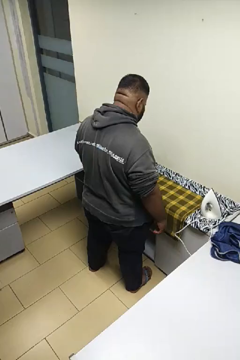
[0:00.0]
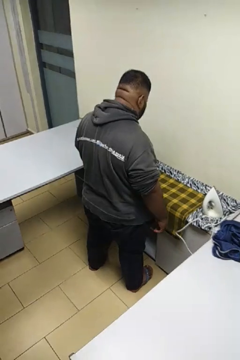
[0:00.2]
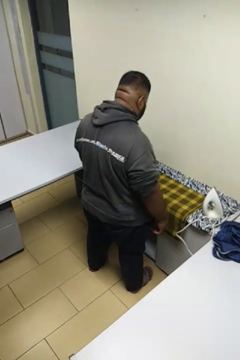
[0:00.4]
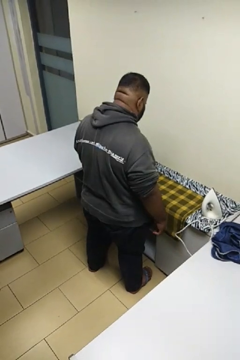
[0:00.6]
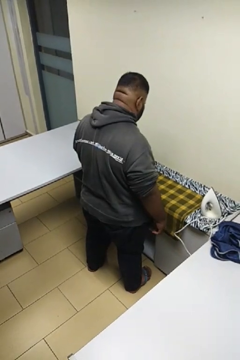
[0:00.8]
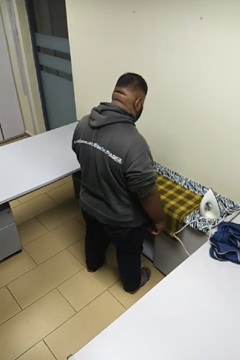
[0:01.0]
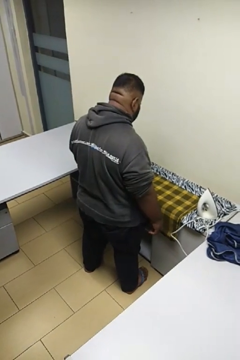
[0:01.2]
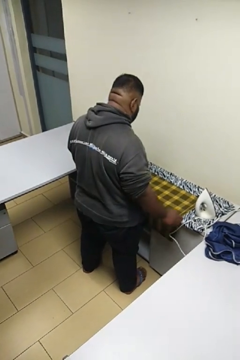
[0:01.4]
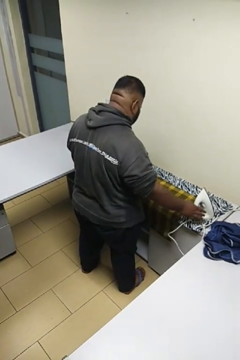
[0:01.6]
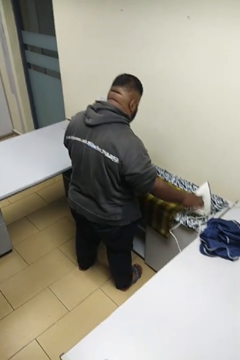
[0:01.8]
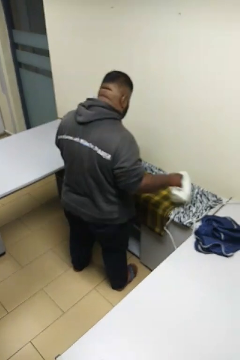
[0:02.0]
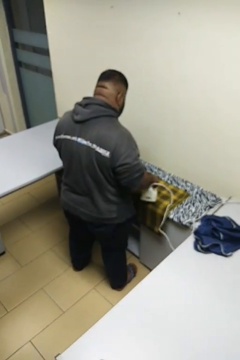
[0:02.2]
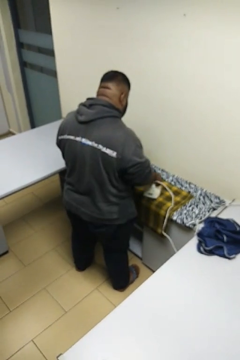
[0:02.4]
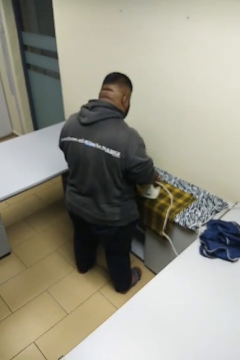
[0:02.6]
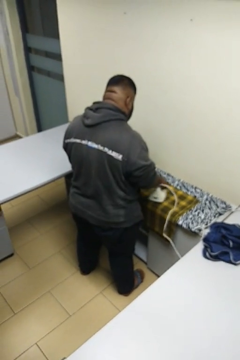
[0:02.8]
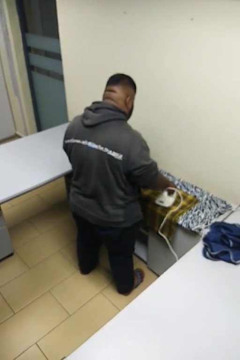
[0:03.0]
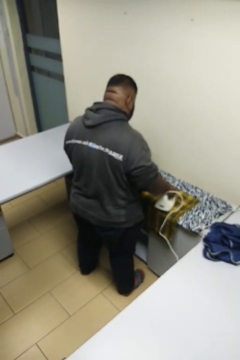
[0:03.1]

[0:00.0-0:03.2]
person irons clothes

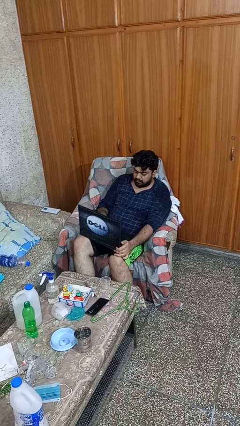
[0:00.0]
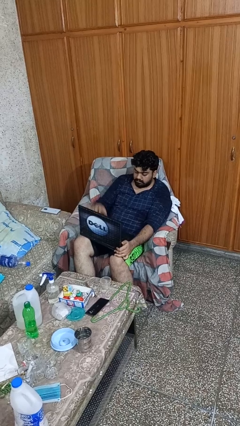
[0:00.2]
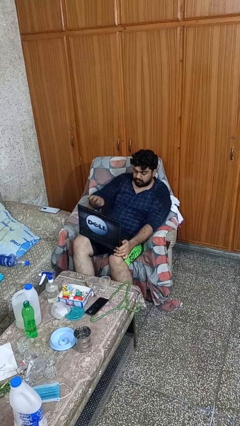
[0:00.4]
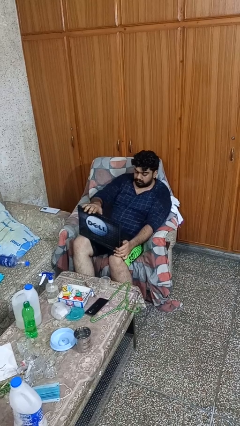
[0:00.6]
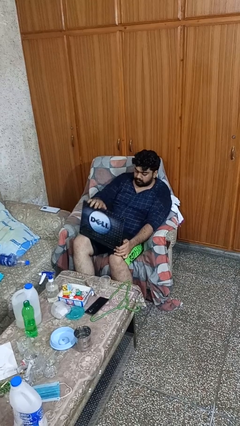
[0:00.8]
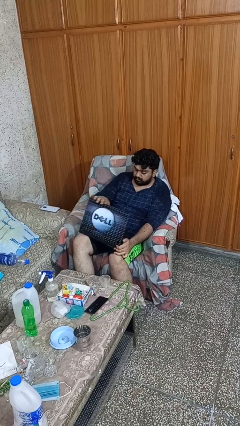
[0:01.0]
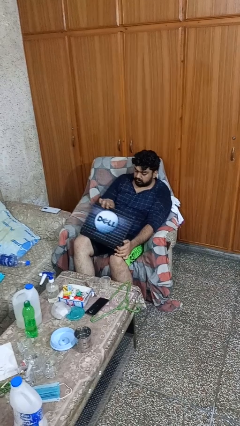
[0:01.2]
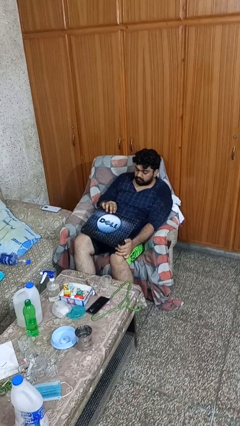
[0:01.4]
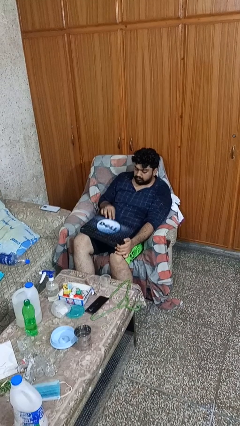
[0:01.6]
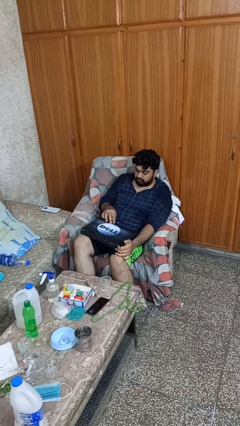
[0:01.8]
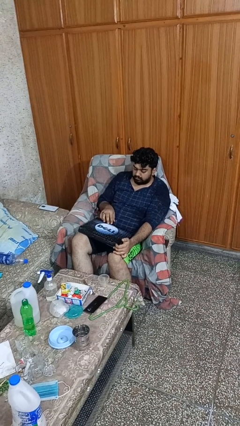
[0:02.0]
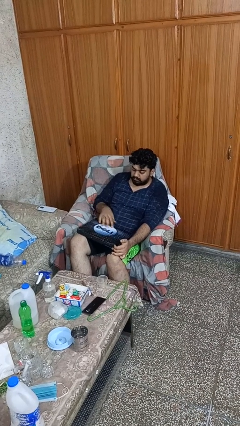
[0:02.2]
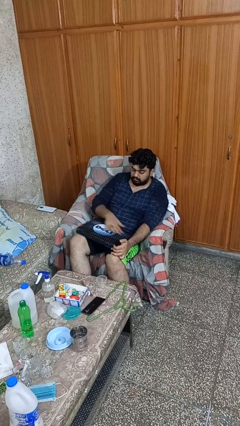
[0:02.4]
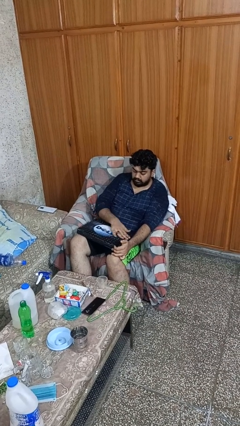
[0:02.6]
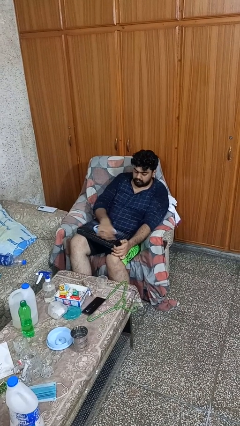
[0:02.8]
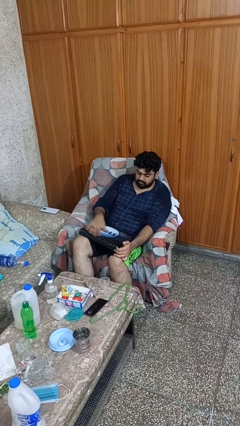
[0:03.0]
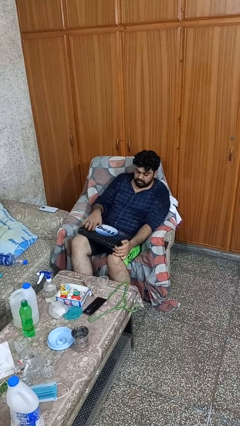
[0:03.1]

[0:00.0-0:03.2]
person closes laptop

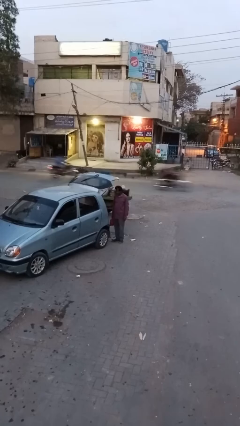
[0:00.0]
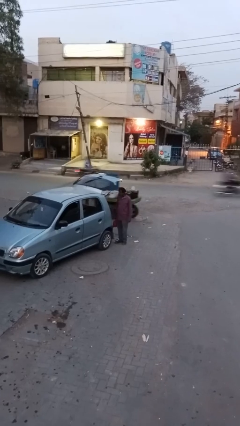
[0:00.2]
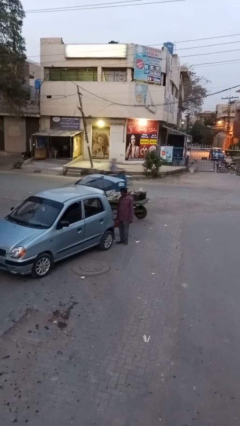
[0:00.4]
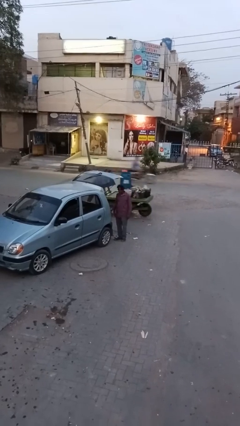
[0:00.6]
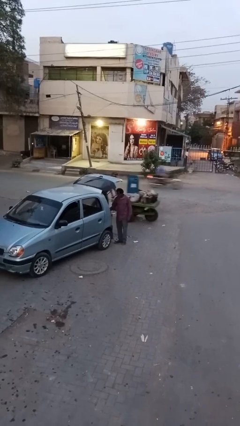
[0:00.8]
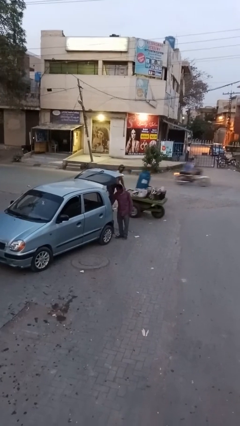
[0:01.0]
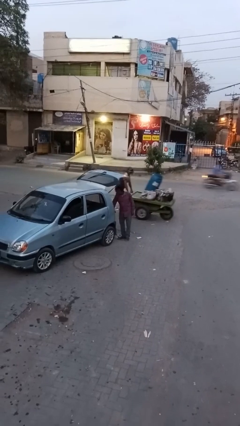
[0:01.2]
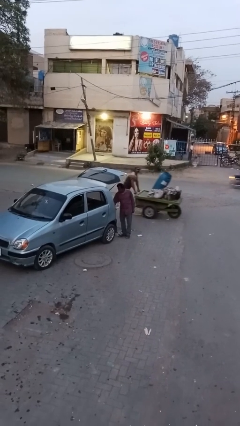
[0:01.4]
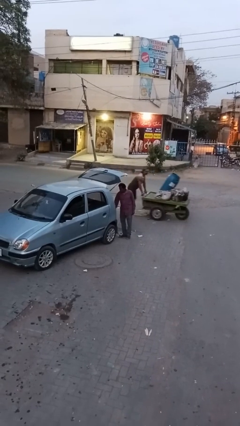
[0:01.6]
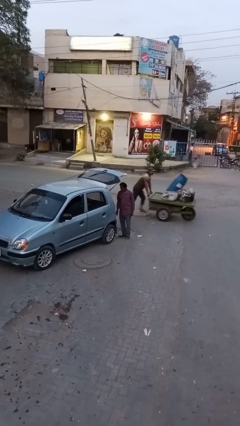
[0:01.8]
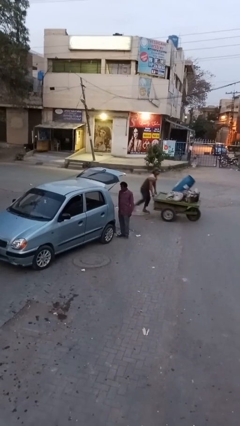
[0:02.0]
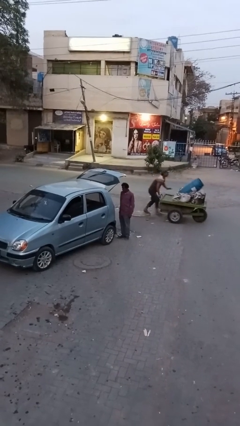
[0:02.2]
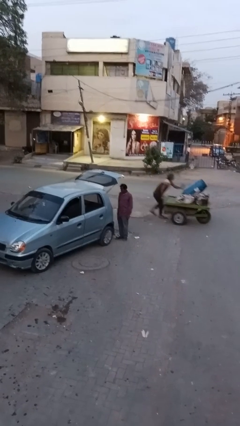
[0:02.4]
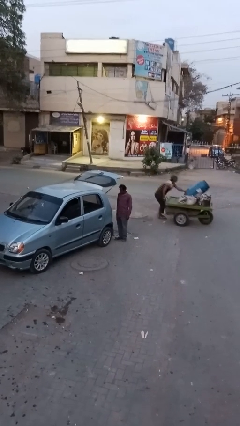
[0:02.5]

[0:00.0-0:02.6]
person loads car

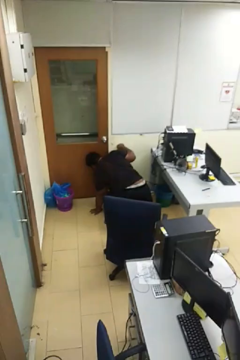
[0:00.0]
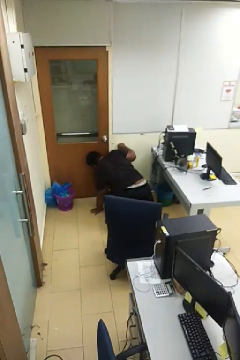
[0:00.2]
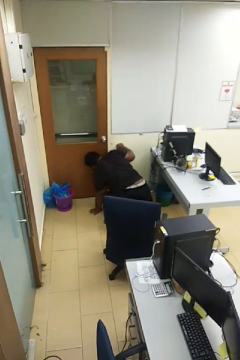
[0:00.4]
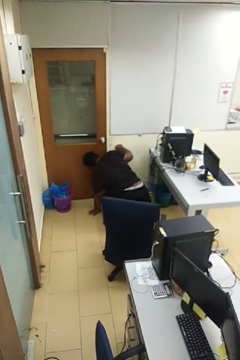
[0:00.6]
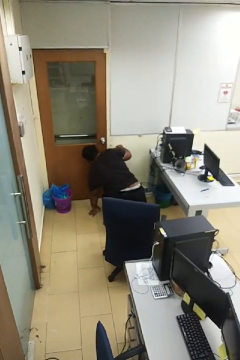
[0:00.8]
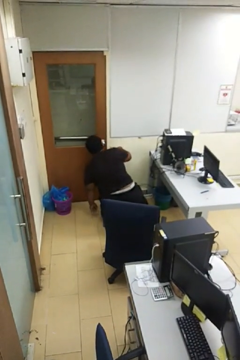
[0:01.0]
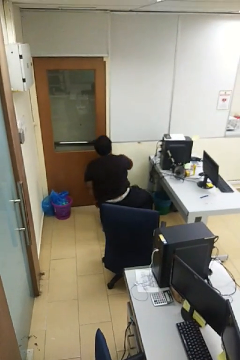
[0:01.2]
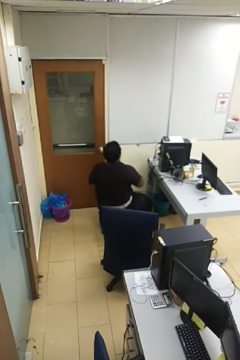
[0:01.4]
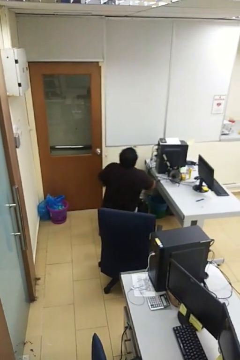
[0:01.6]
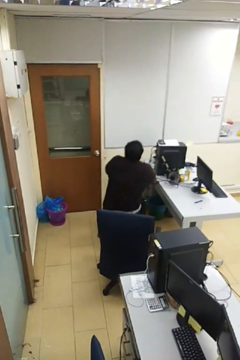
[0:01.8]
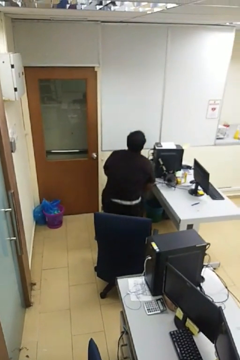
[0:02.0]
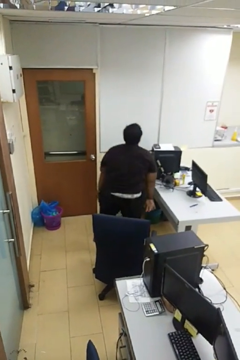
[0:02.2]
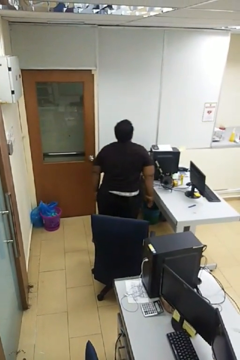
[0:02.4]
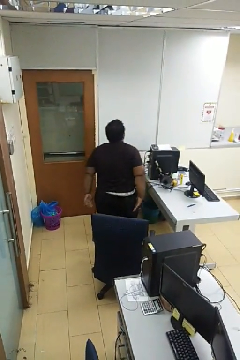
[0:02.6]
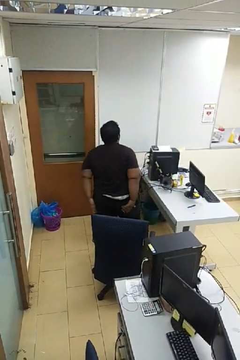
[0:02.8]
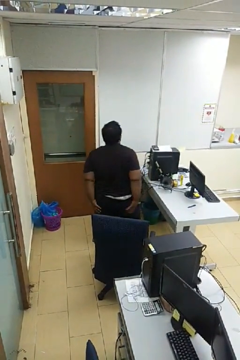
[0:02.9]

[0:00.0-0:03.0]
person stands up from floor

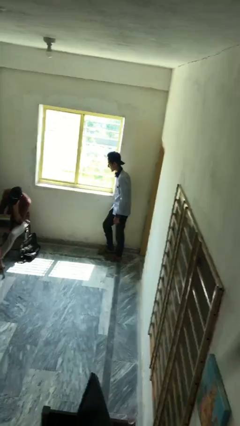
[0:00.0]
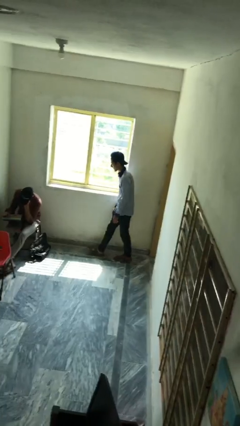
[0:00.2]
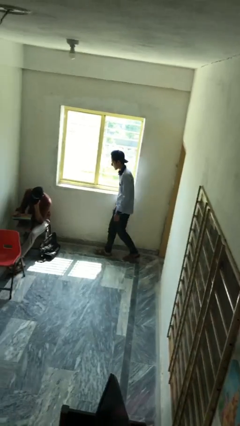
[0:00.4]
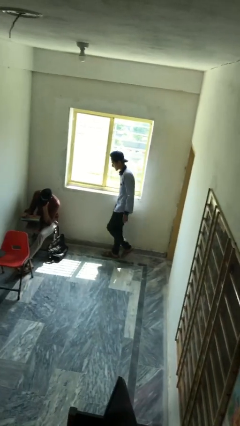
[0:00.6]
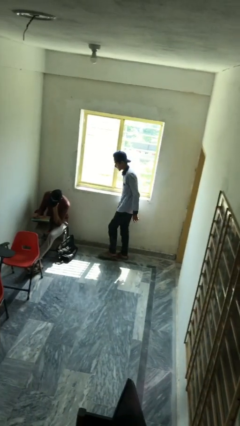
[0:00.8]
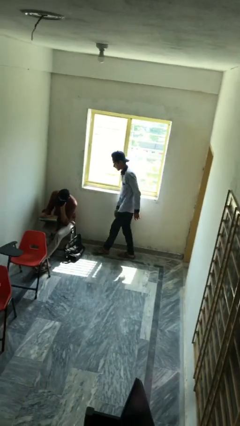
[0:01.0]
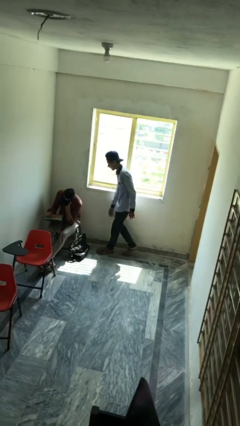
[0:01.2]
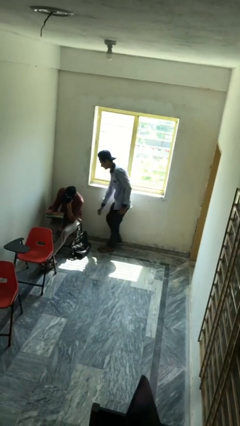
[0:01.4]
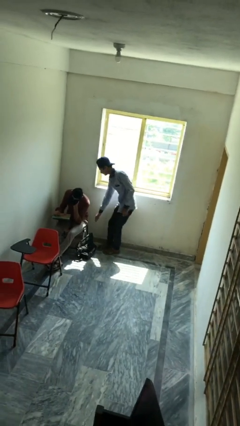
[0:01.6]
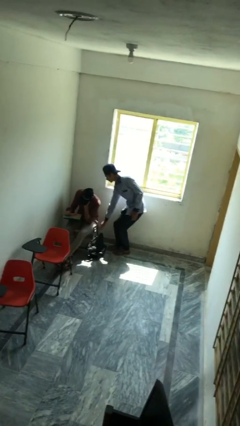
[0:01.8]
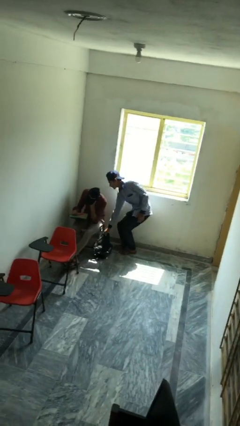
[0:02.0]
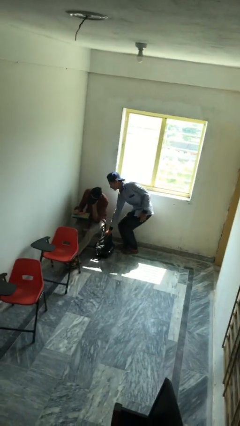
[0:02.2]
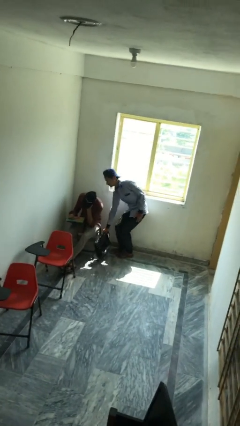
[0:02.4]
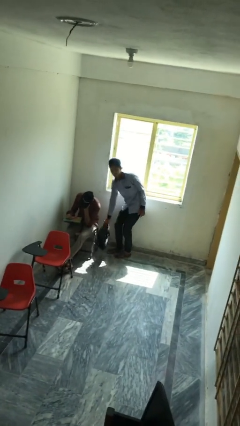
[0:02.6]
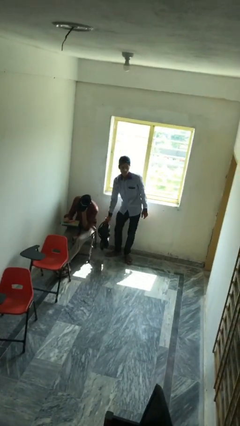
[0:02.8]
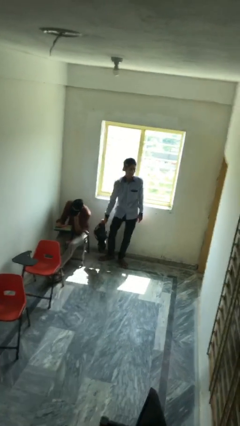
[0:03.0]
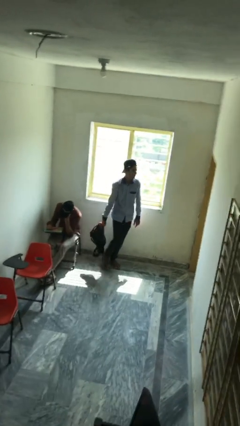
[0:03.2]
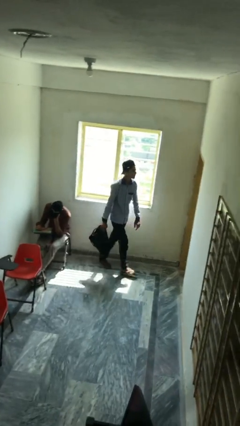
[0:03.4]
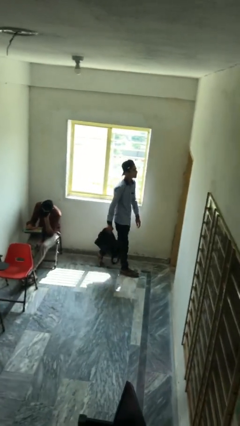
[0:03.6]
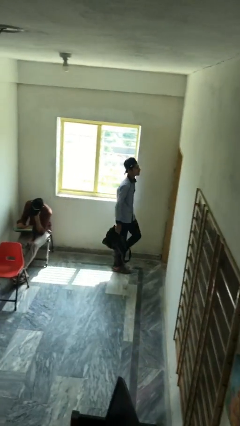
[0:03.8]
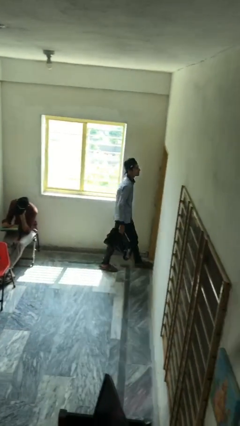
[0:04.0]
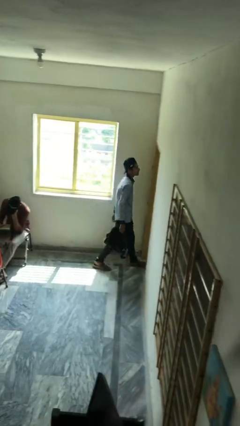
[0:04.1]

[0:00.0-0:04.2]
person steals object from person

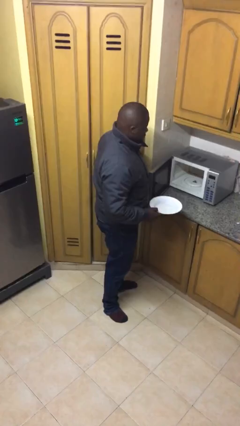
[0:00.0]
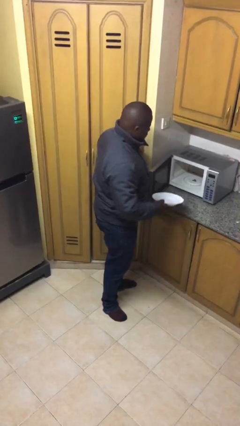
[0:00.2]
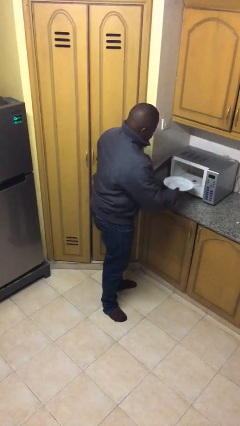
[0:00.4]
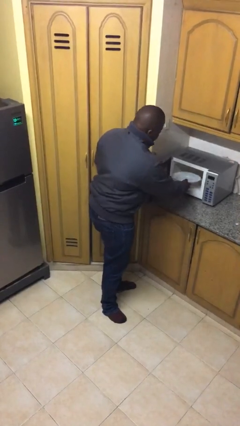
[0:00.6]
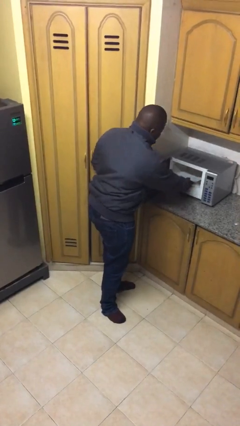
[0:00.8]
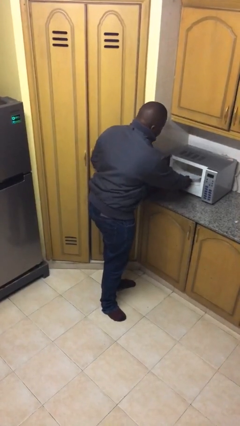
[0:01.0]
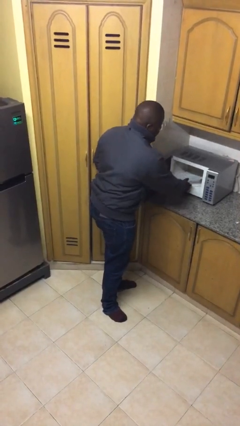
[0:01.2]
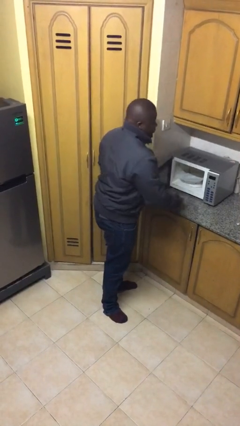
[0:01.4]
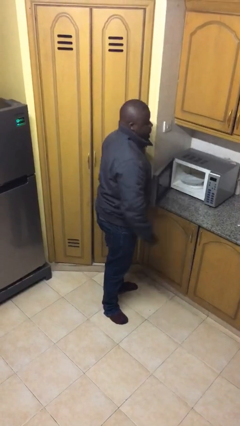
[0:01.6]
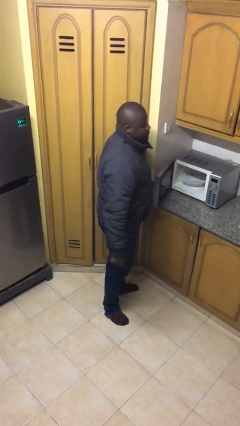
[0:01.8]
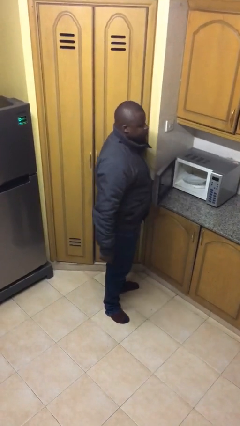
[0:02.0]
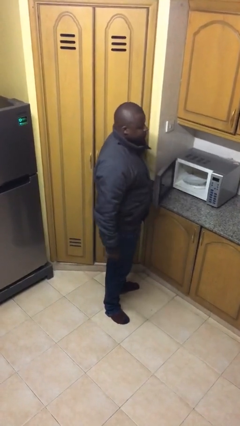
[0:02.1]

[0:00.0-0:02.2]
person puts object into microwave
